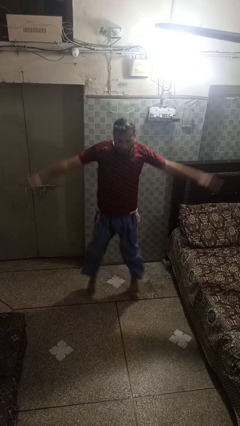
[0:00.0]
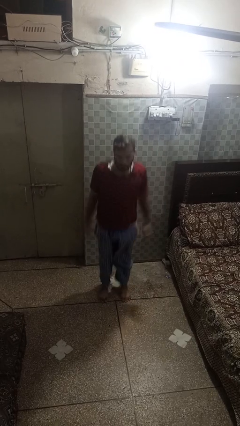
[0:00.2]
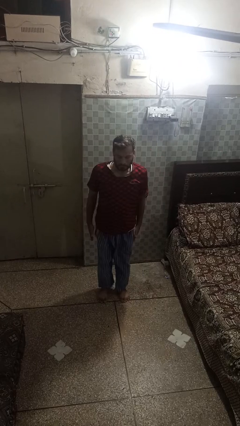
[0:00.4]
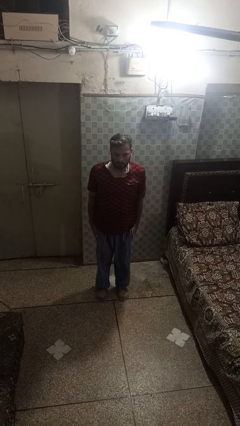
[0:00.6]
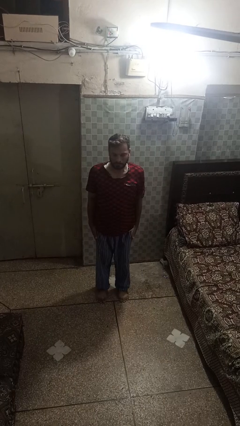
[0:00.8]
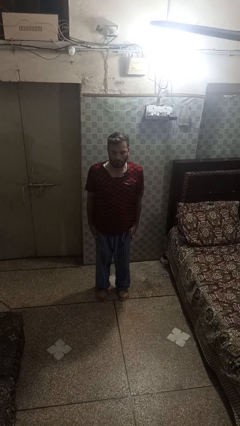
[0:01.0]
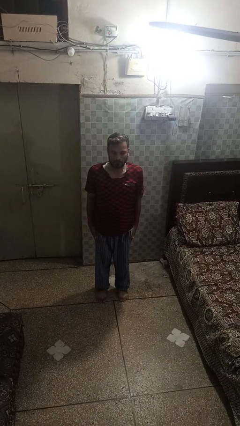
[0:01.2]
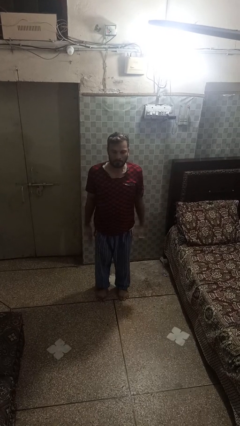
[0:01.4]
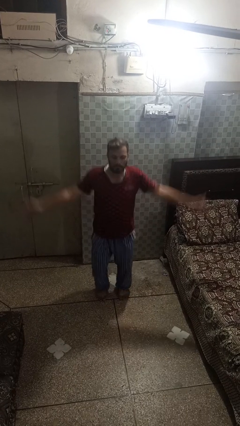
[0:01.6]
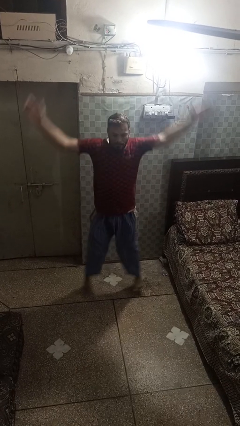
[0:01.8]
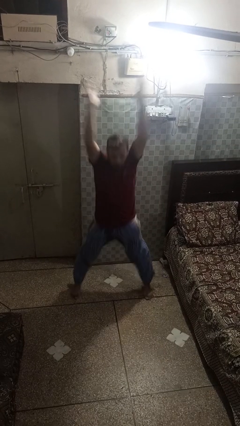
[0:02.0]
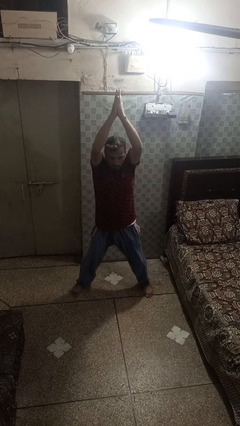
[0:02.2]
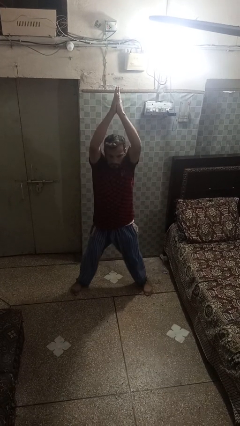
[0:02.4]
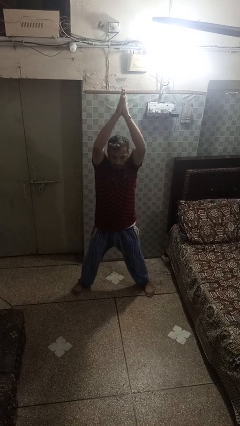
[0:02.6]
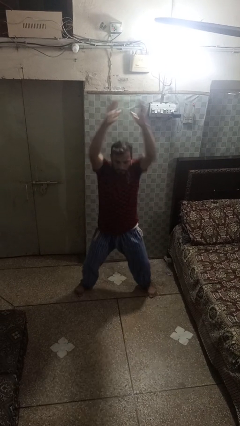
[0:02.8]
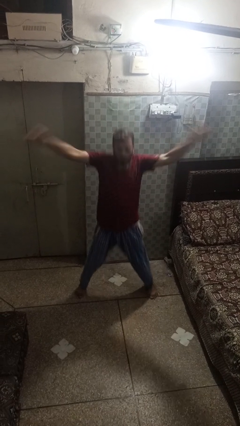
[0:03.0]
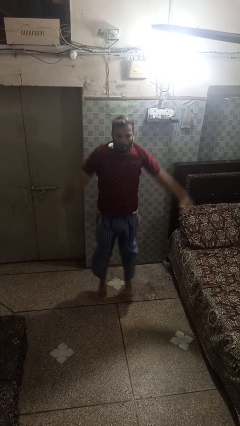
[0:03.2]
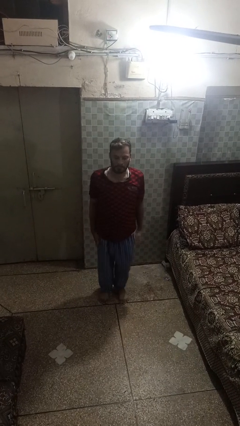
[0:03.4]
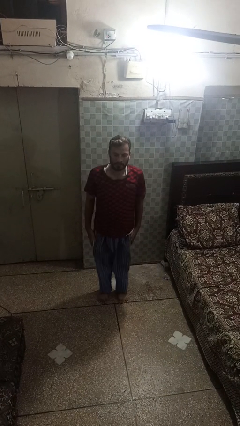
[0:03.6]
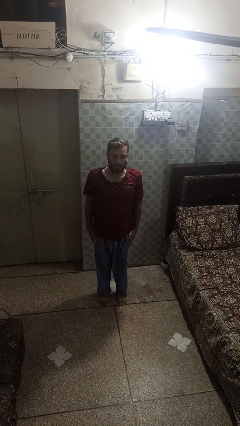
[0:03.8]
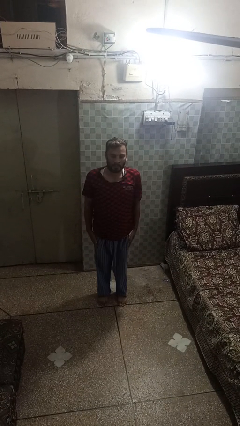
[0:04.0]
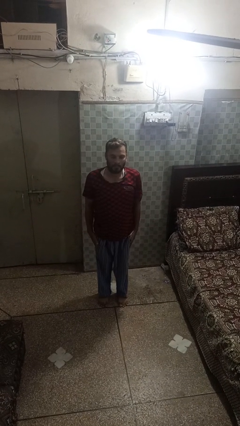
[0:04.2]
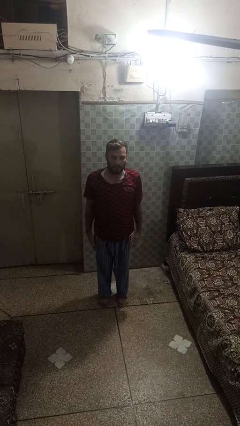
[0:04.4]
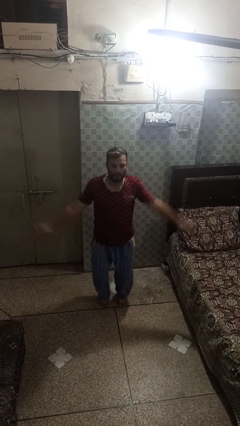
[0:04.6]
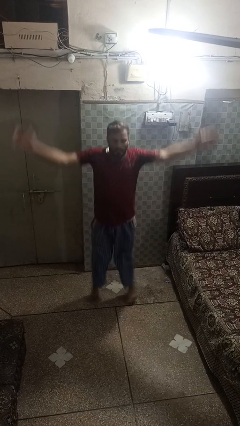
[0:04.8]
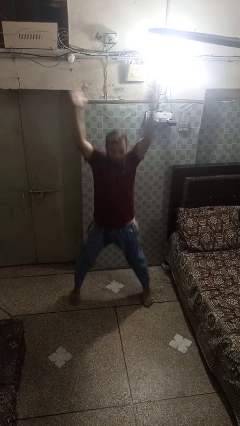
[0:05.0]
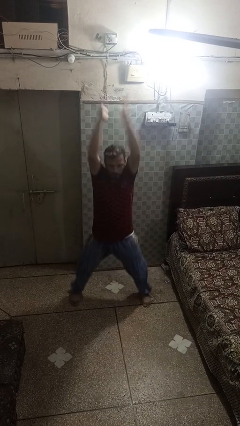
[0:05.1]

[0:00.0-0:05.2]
person exercises with jumping jacks

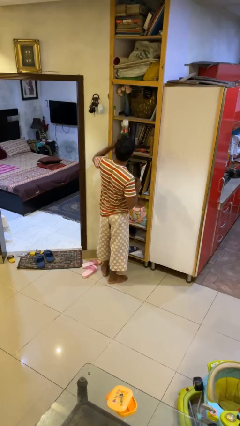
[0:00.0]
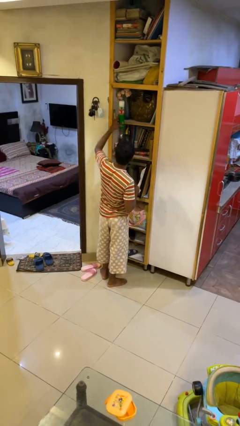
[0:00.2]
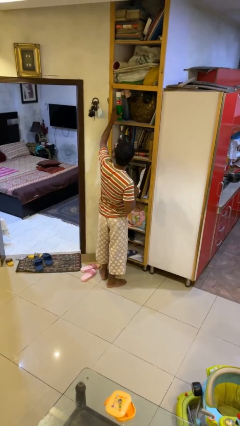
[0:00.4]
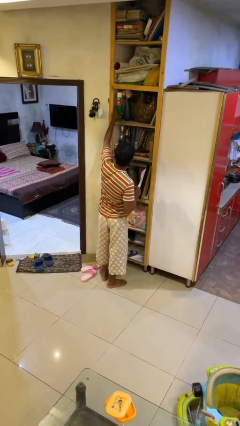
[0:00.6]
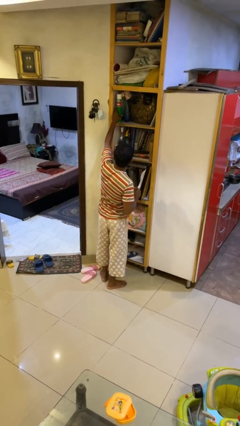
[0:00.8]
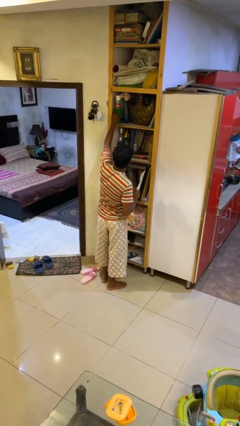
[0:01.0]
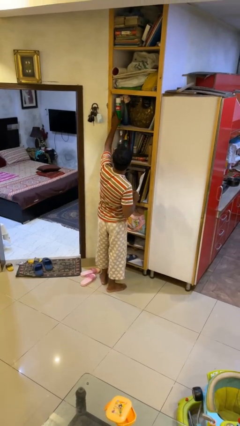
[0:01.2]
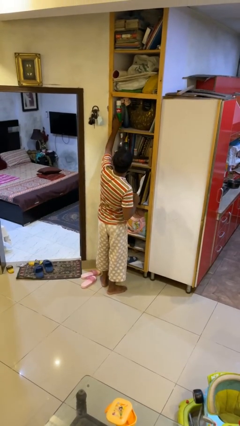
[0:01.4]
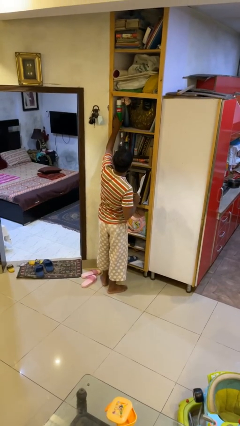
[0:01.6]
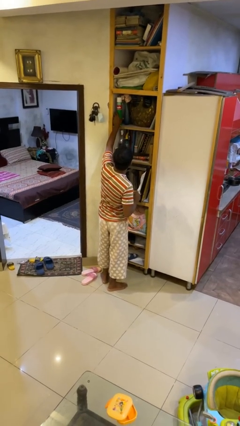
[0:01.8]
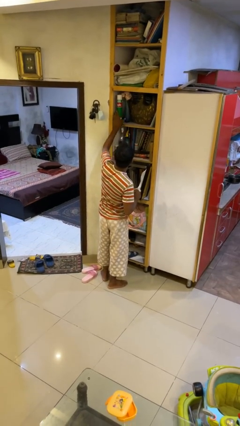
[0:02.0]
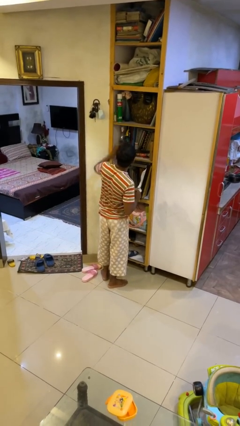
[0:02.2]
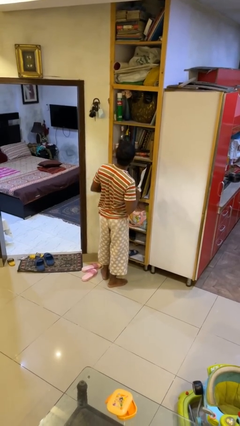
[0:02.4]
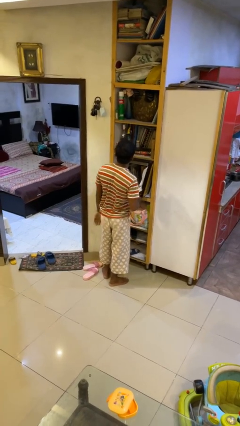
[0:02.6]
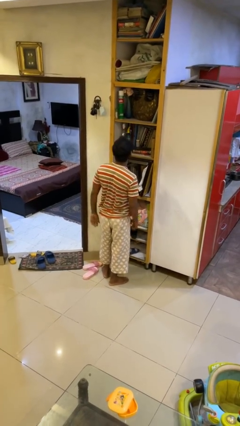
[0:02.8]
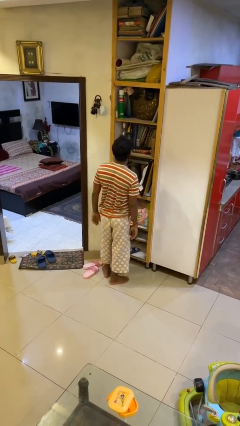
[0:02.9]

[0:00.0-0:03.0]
person puts down object on shelf

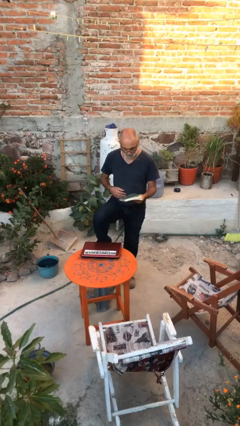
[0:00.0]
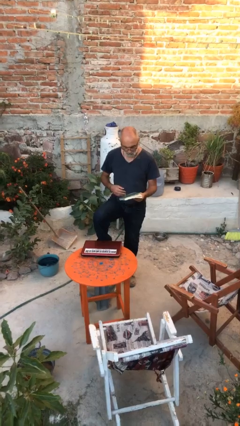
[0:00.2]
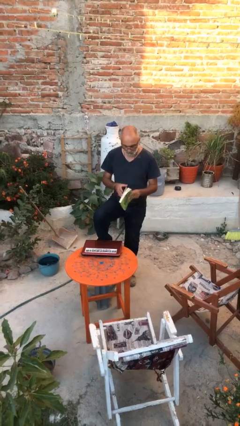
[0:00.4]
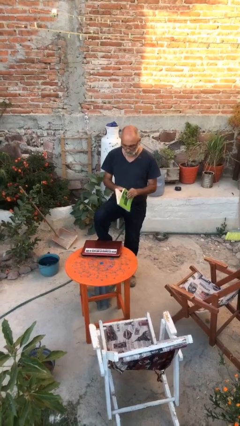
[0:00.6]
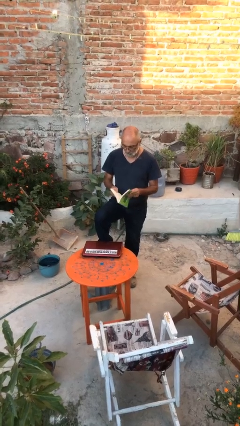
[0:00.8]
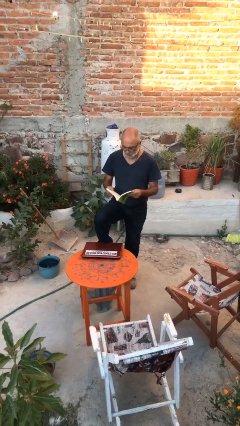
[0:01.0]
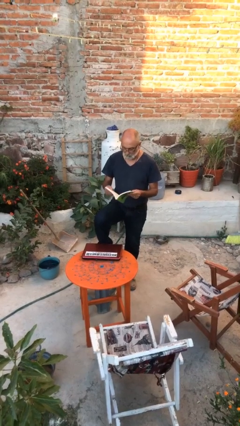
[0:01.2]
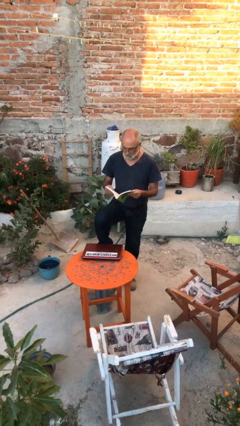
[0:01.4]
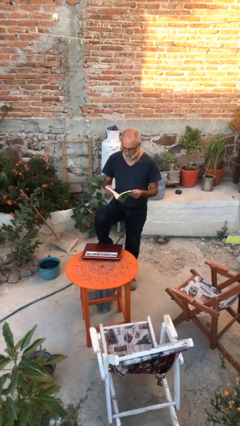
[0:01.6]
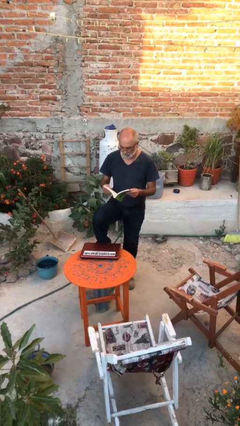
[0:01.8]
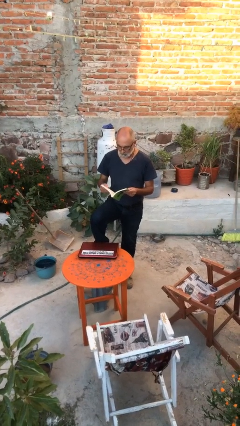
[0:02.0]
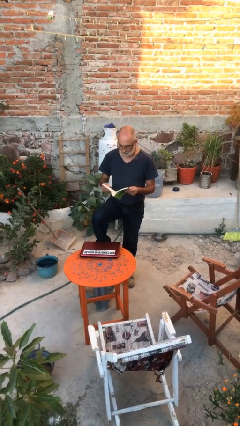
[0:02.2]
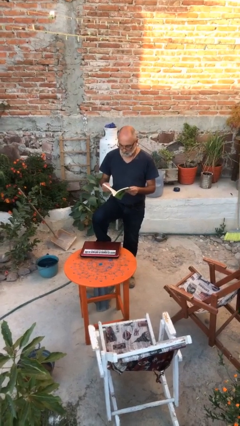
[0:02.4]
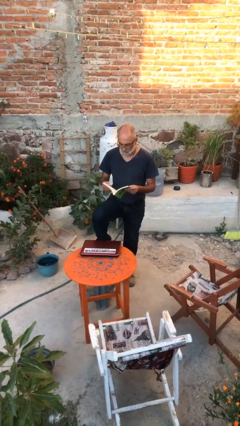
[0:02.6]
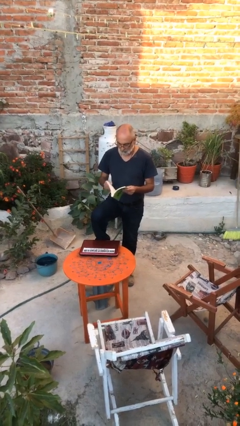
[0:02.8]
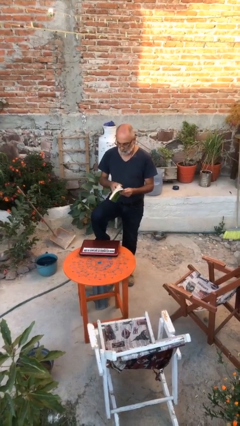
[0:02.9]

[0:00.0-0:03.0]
person reads document

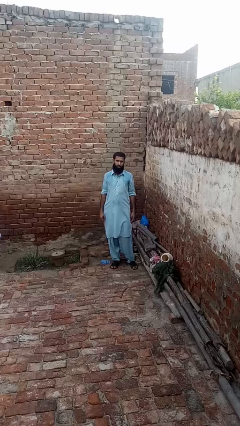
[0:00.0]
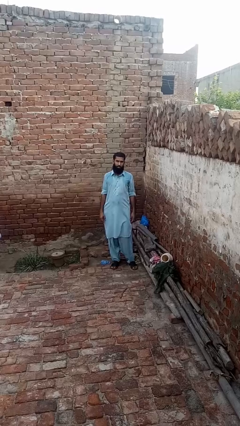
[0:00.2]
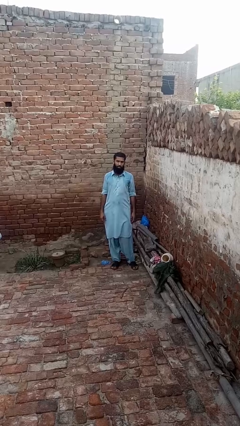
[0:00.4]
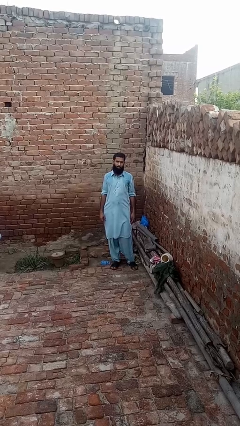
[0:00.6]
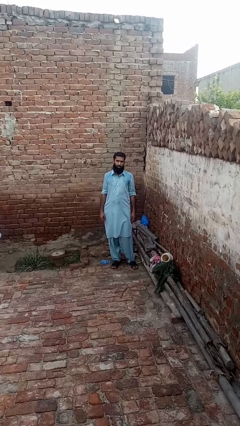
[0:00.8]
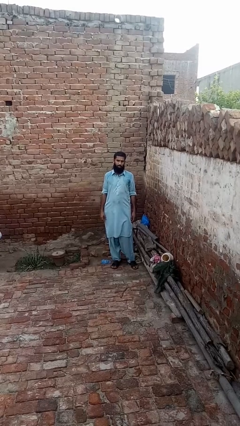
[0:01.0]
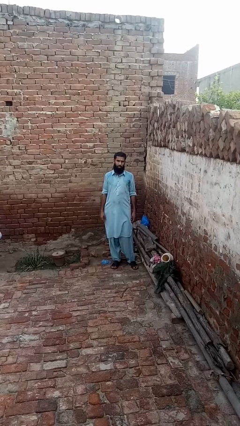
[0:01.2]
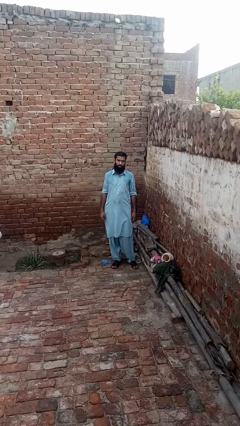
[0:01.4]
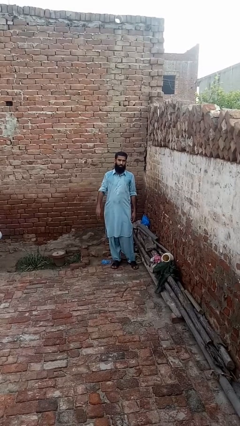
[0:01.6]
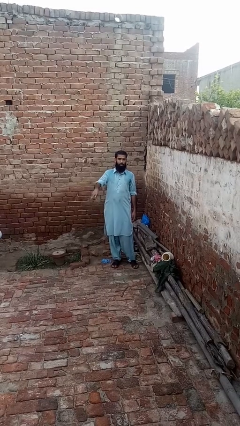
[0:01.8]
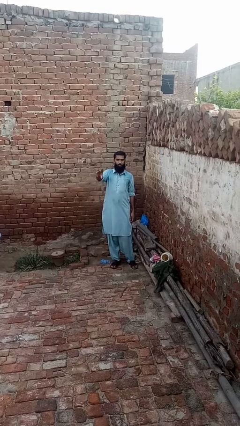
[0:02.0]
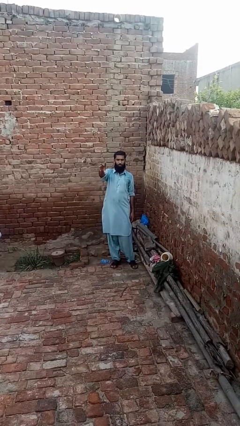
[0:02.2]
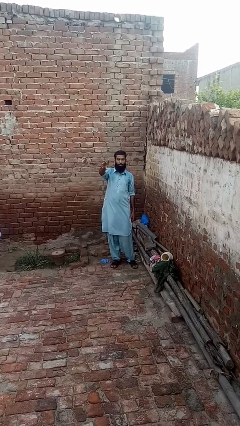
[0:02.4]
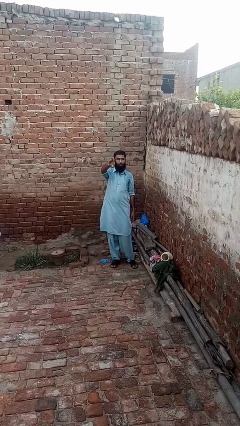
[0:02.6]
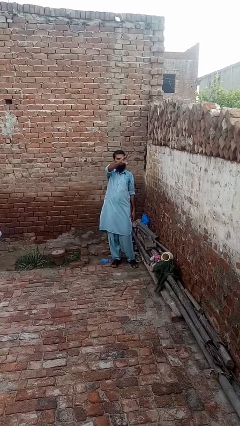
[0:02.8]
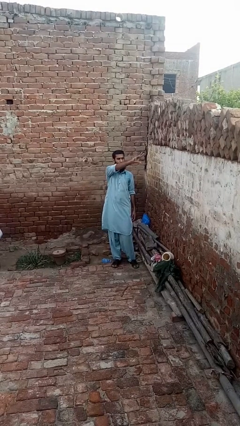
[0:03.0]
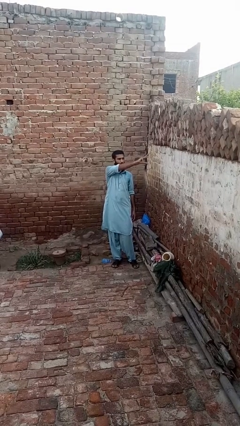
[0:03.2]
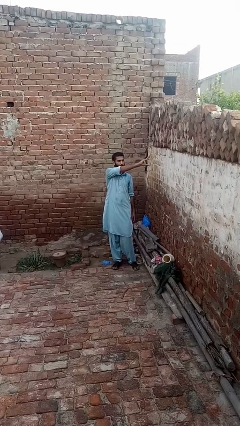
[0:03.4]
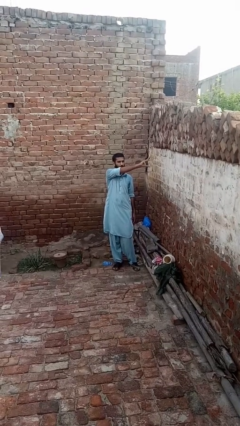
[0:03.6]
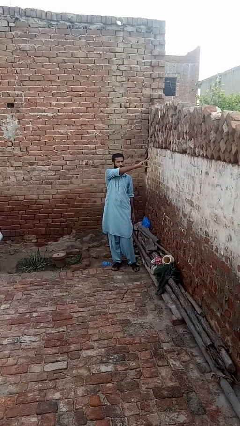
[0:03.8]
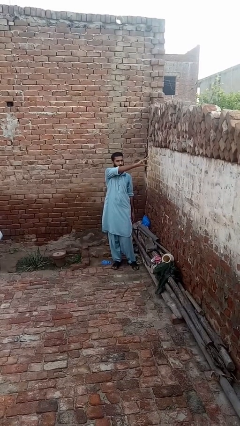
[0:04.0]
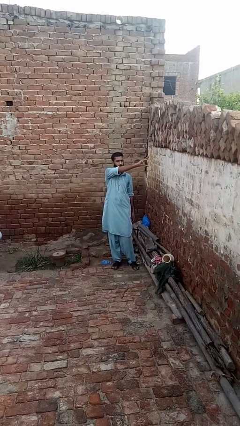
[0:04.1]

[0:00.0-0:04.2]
person gestures swipe left

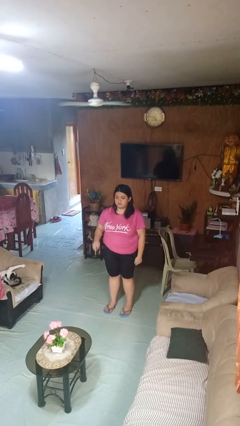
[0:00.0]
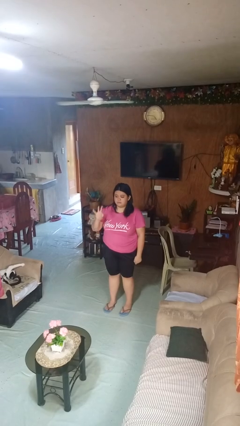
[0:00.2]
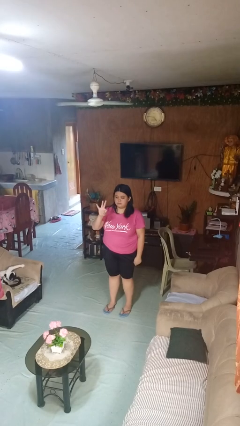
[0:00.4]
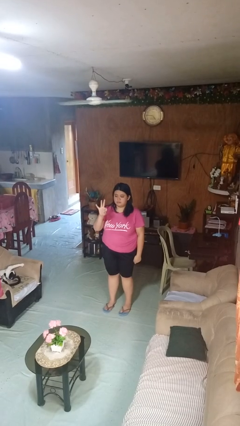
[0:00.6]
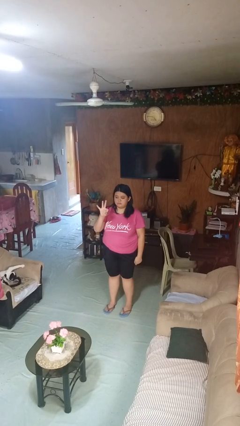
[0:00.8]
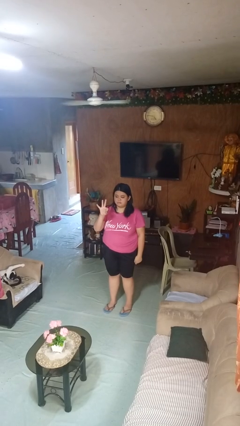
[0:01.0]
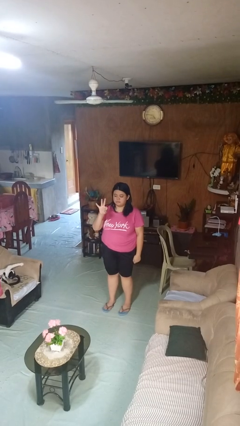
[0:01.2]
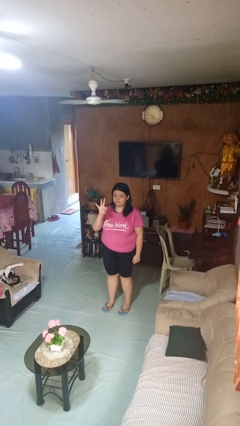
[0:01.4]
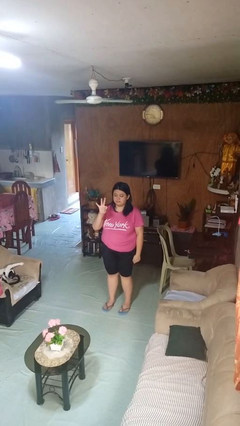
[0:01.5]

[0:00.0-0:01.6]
person gestures number three

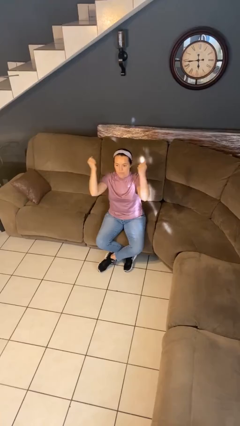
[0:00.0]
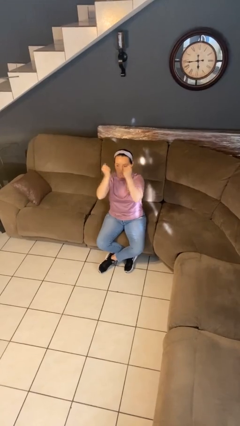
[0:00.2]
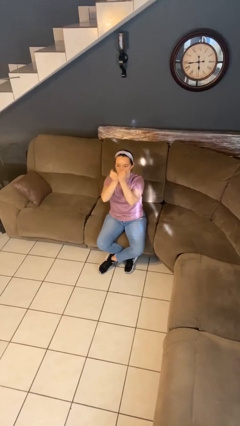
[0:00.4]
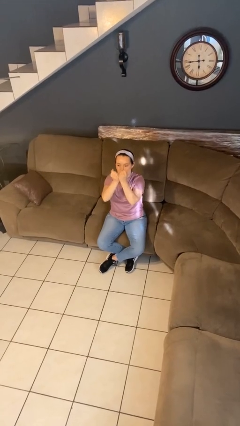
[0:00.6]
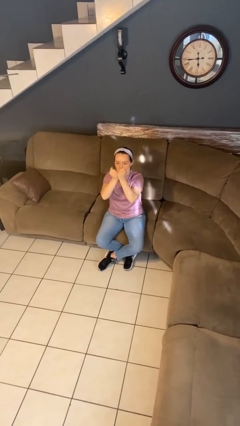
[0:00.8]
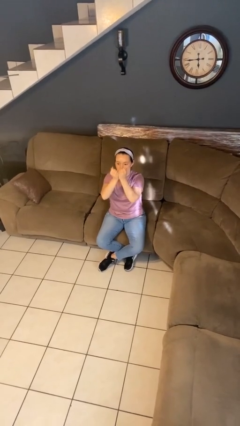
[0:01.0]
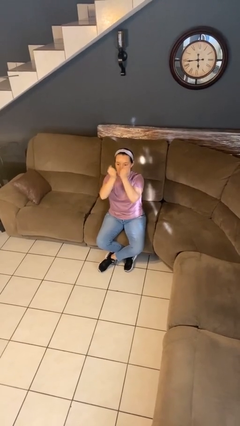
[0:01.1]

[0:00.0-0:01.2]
person gestures zoom in
